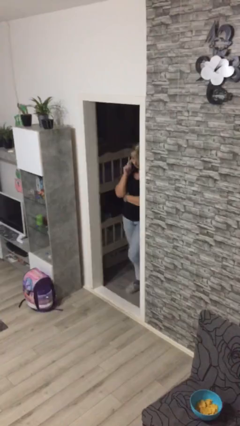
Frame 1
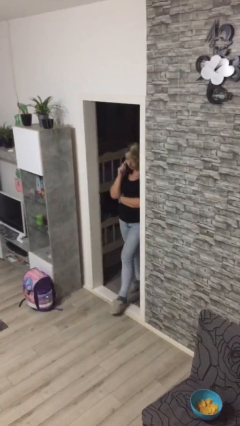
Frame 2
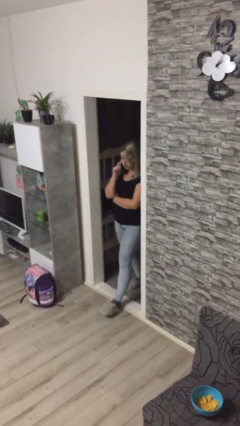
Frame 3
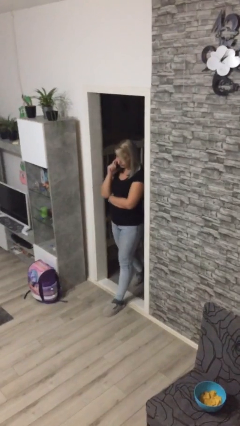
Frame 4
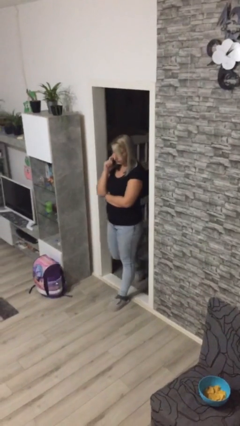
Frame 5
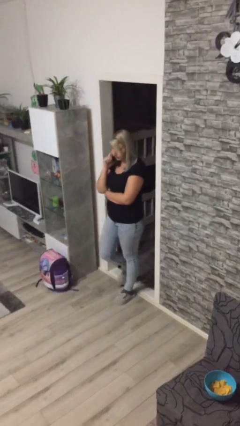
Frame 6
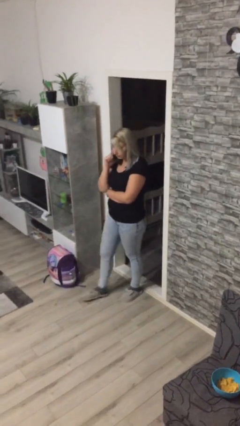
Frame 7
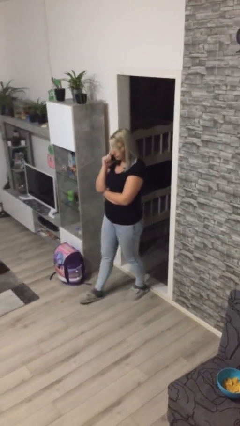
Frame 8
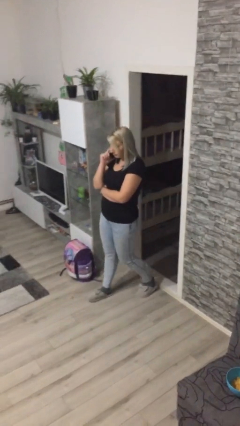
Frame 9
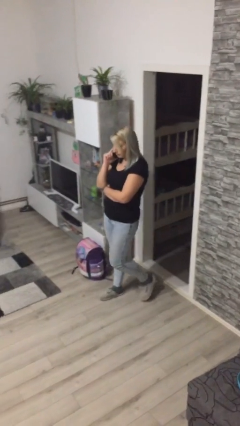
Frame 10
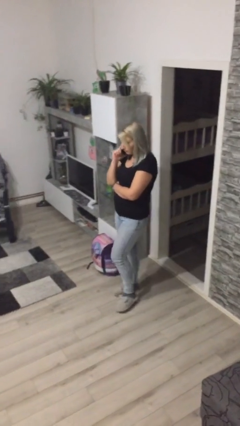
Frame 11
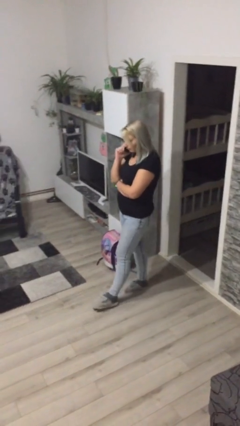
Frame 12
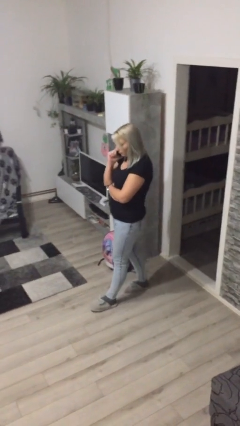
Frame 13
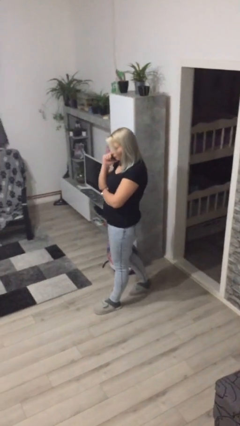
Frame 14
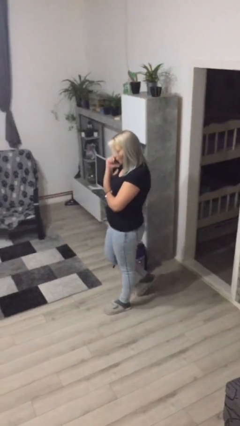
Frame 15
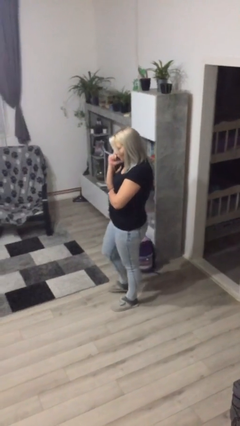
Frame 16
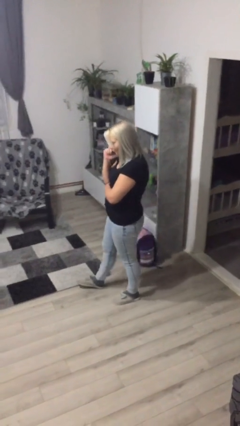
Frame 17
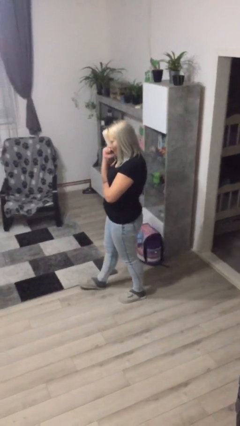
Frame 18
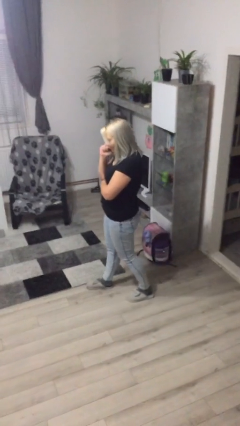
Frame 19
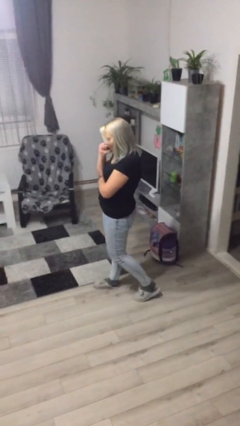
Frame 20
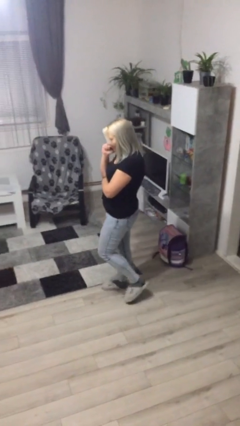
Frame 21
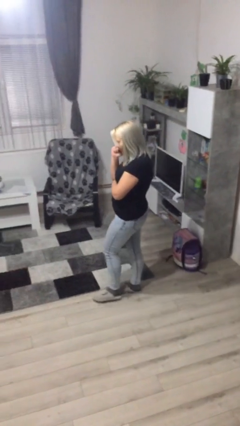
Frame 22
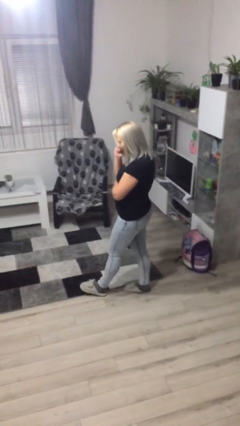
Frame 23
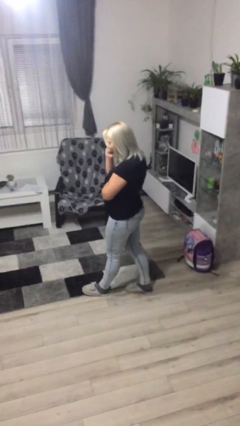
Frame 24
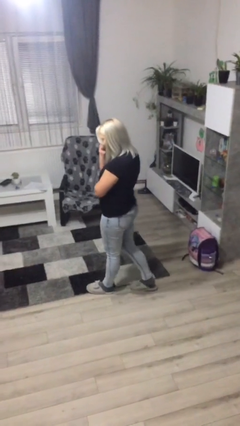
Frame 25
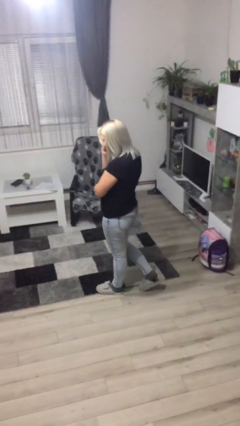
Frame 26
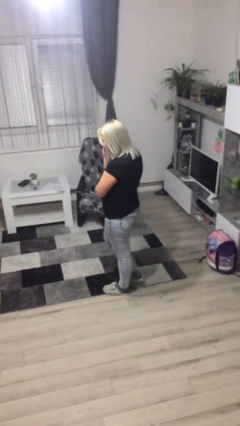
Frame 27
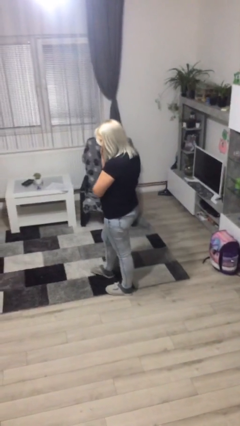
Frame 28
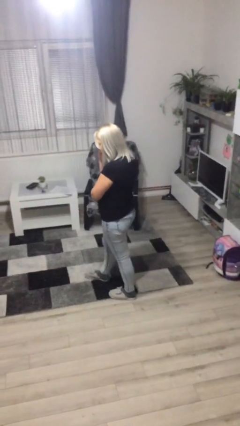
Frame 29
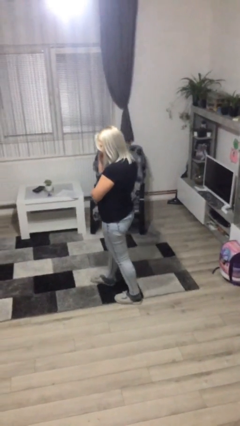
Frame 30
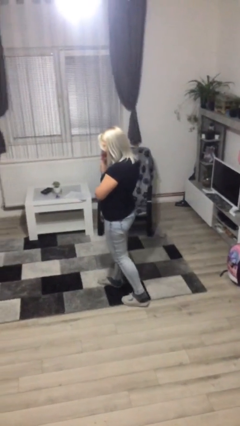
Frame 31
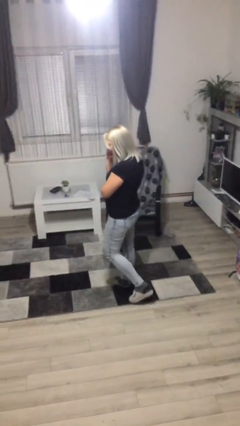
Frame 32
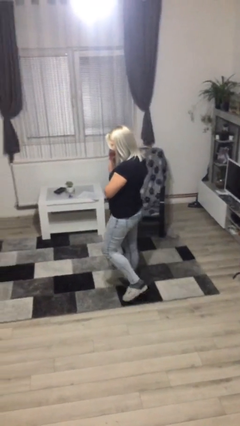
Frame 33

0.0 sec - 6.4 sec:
person enters scene through structure

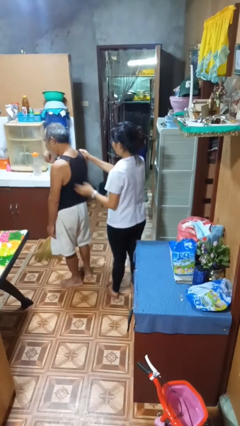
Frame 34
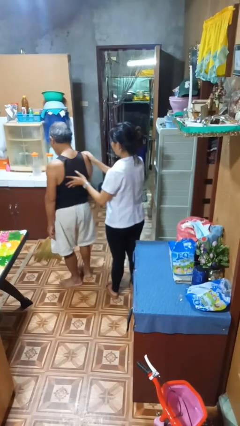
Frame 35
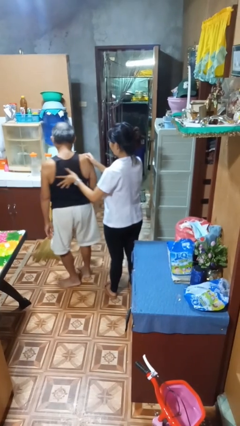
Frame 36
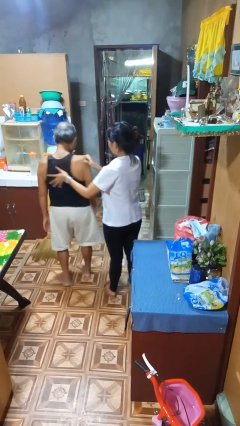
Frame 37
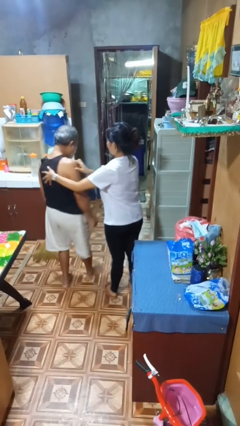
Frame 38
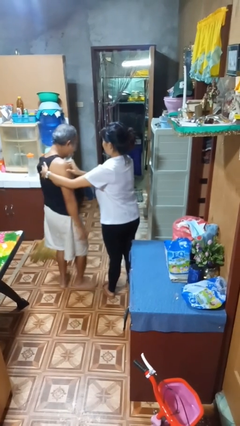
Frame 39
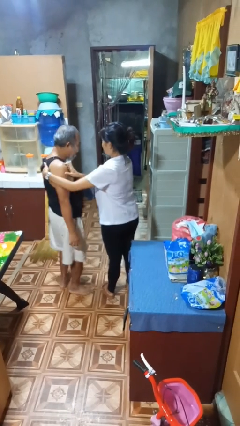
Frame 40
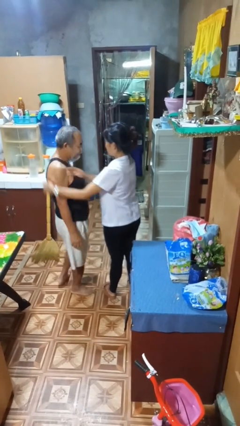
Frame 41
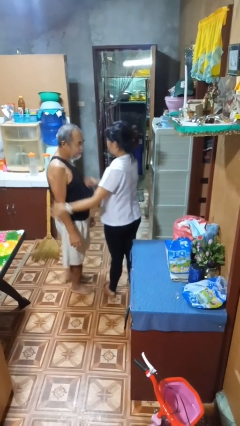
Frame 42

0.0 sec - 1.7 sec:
person spins person around

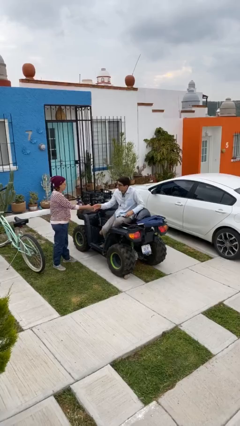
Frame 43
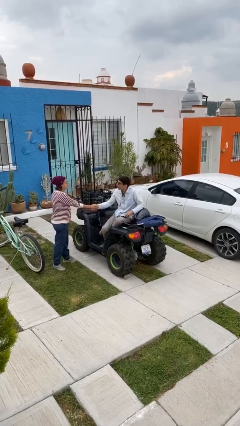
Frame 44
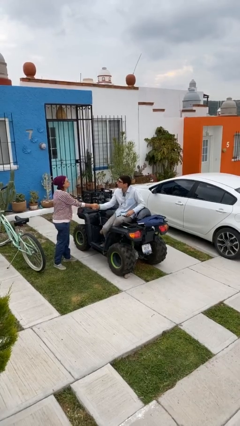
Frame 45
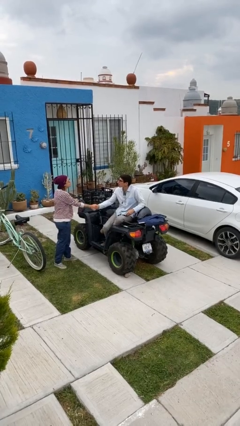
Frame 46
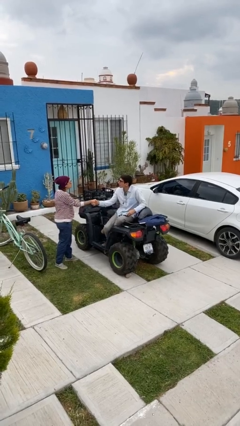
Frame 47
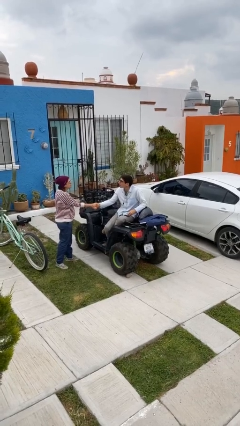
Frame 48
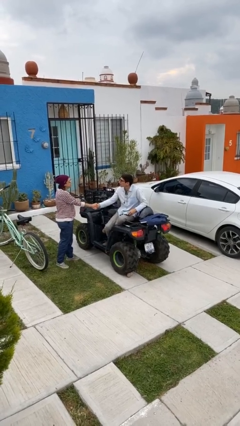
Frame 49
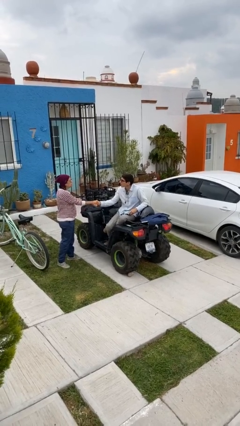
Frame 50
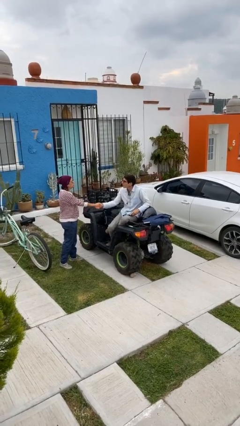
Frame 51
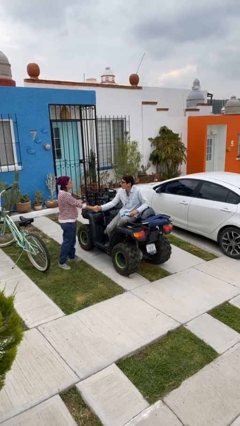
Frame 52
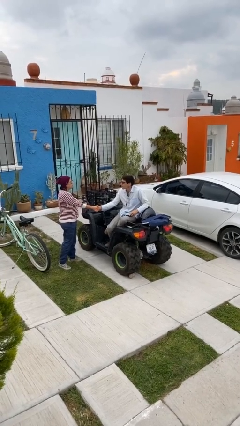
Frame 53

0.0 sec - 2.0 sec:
person shakes hand

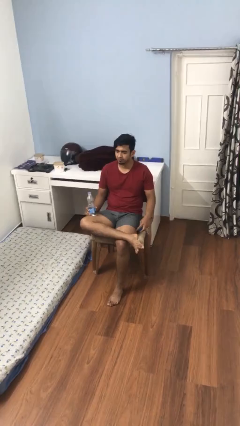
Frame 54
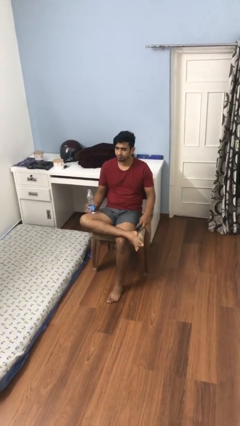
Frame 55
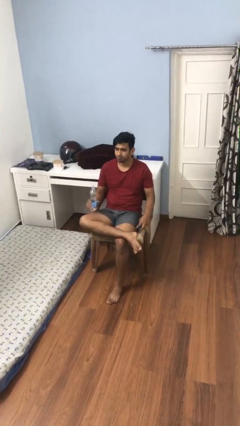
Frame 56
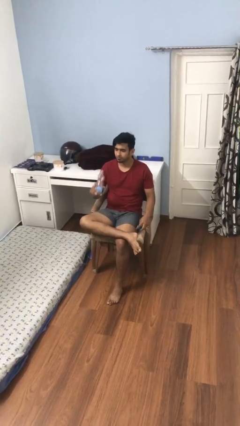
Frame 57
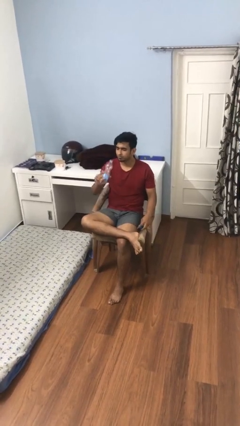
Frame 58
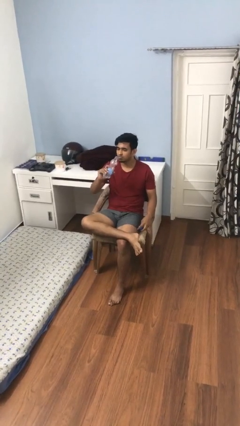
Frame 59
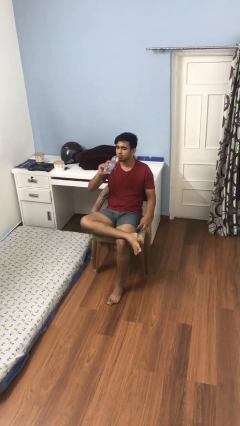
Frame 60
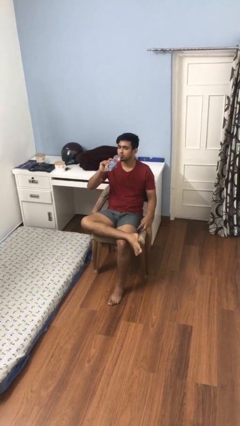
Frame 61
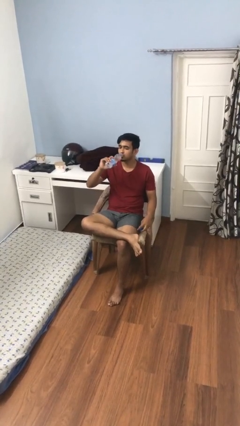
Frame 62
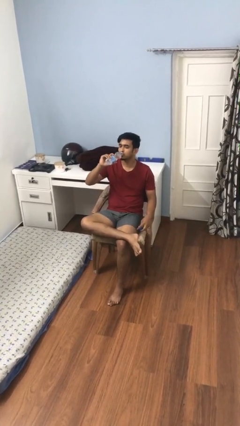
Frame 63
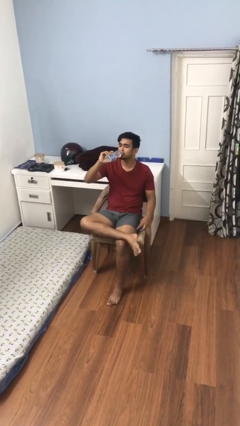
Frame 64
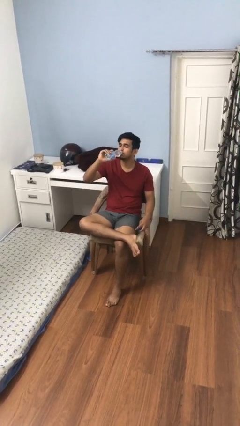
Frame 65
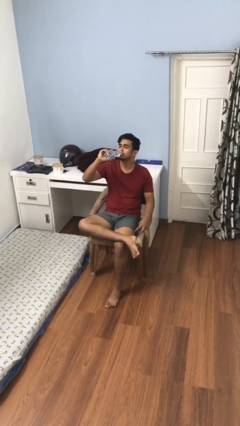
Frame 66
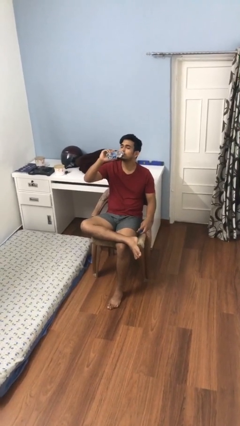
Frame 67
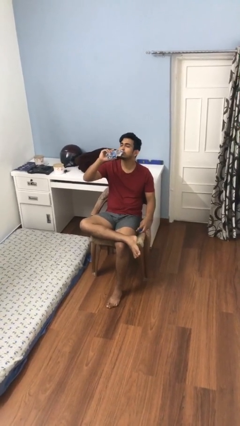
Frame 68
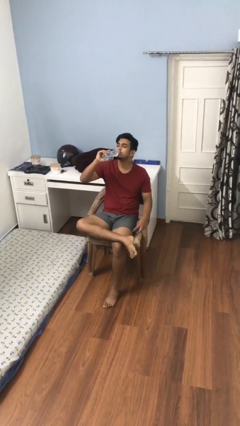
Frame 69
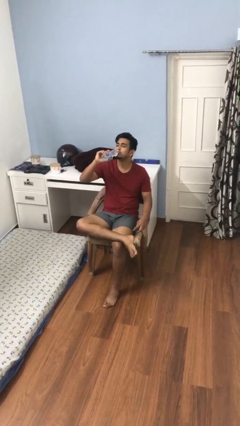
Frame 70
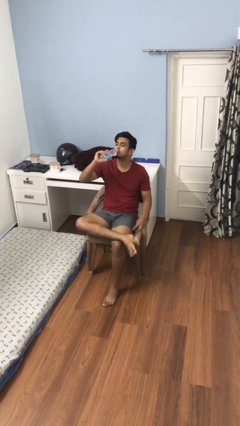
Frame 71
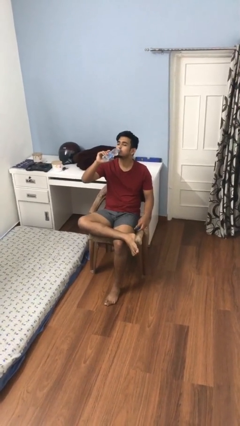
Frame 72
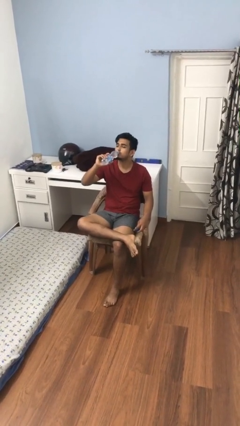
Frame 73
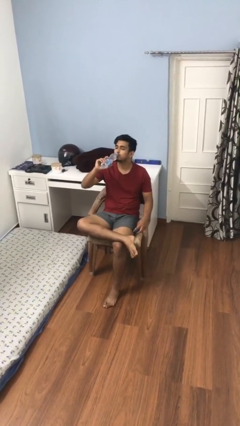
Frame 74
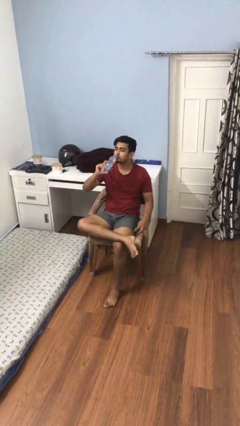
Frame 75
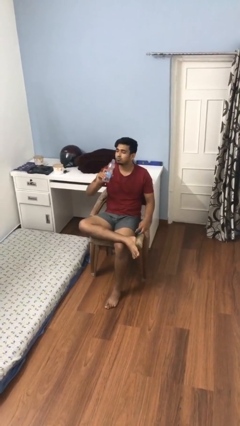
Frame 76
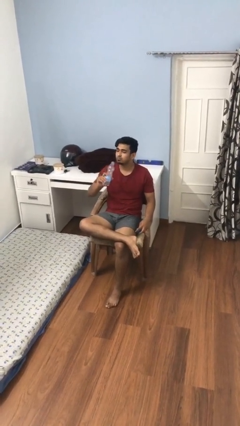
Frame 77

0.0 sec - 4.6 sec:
person drinks from bottle

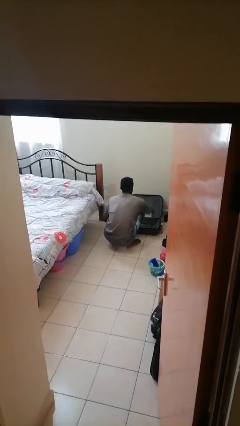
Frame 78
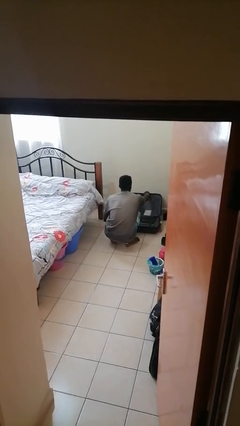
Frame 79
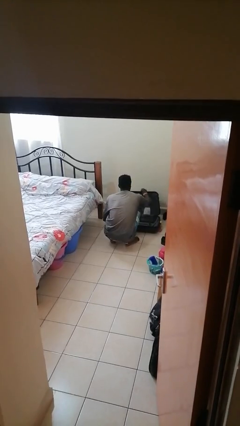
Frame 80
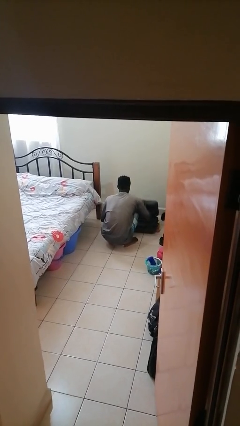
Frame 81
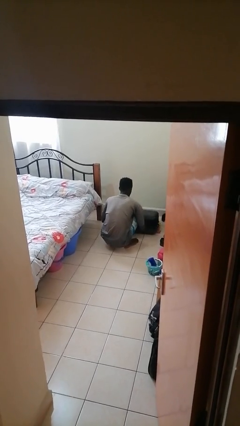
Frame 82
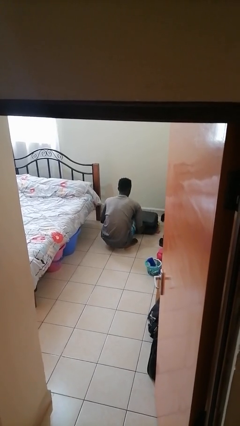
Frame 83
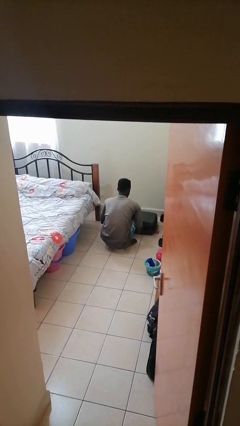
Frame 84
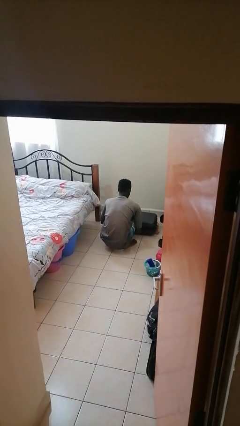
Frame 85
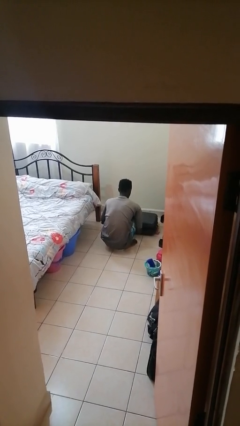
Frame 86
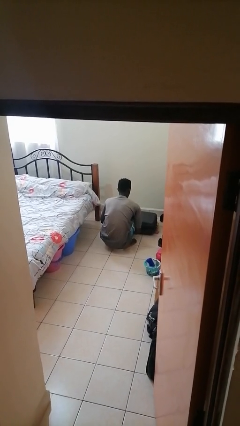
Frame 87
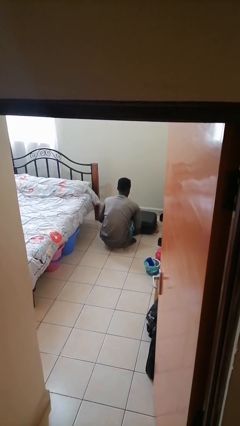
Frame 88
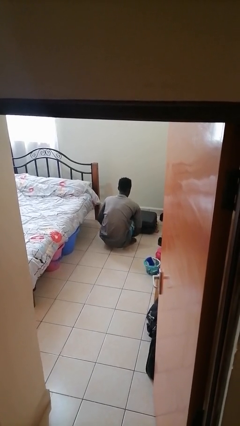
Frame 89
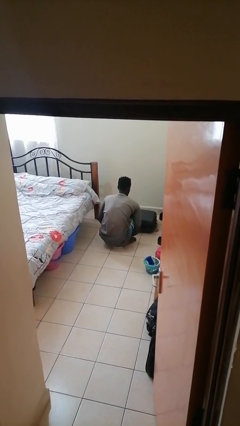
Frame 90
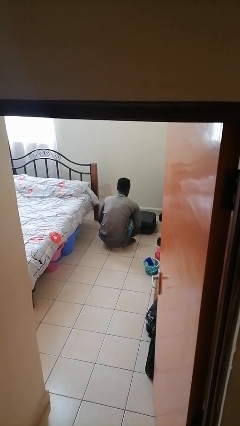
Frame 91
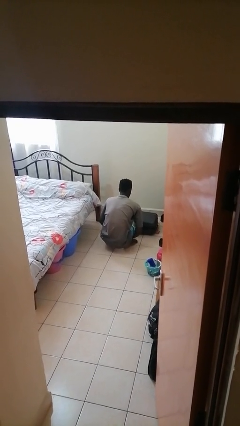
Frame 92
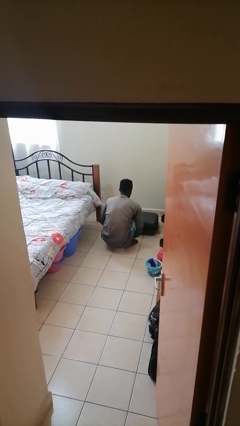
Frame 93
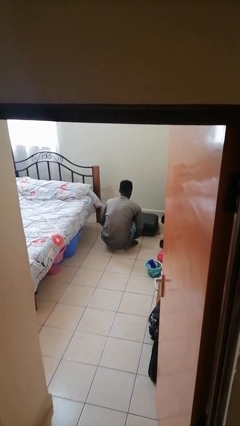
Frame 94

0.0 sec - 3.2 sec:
person closes suitcase
